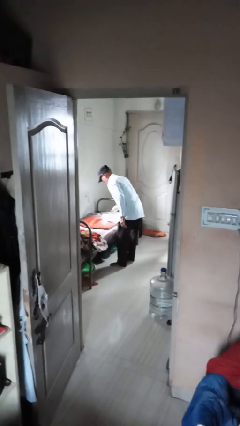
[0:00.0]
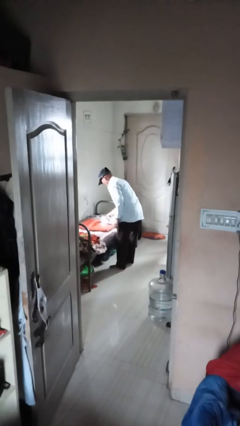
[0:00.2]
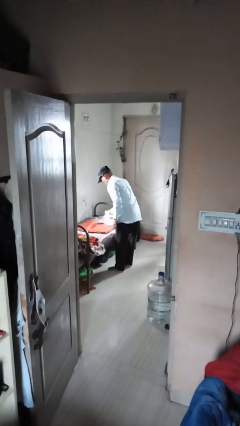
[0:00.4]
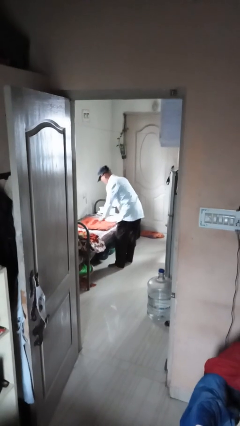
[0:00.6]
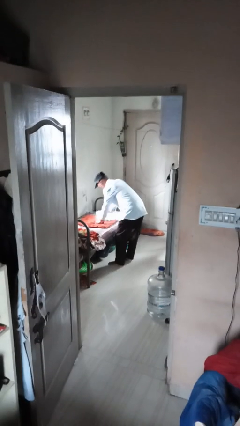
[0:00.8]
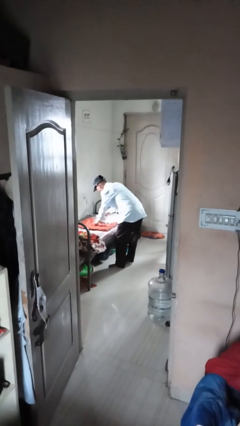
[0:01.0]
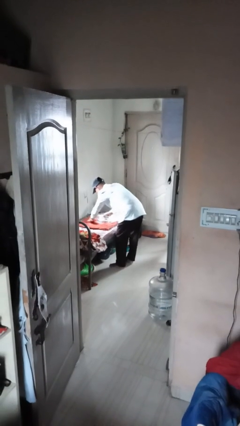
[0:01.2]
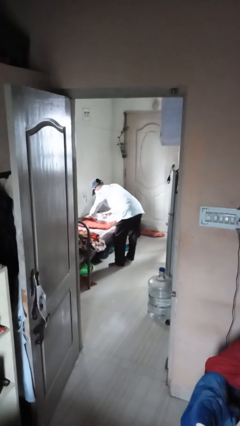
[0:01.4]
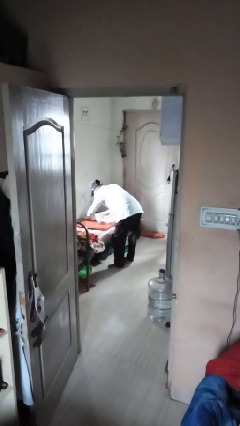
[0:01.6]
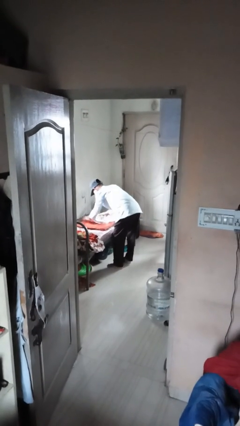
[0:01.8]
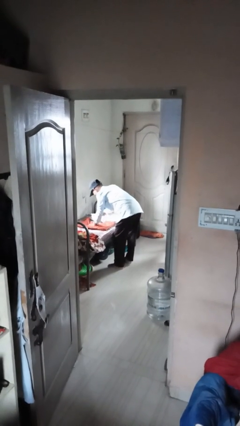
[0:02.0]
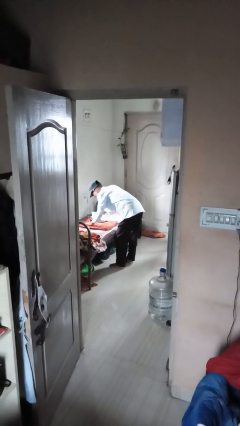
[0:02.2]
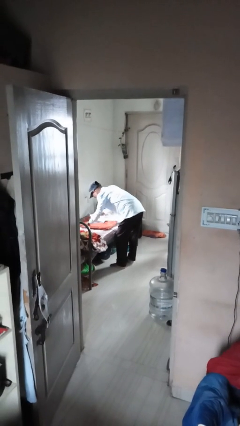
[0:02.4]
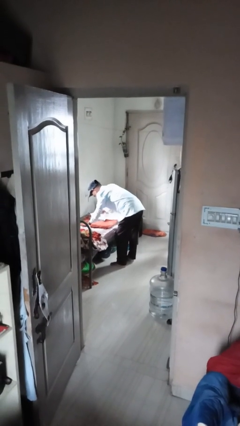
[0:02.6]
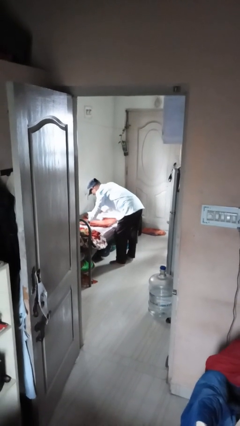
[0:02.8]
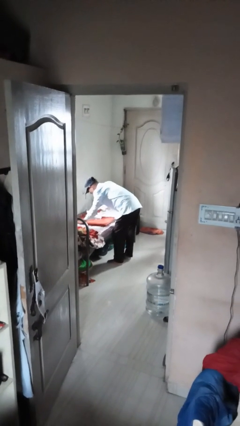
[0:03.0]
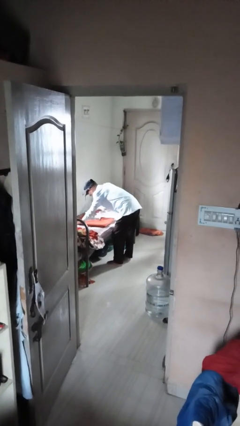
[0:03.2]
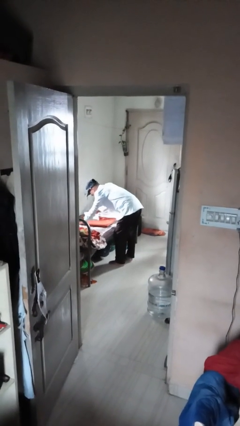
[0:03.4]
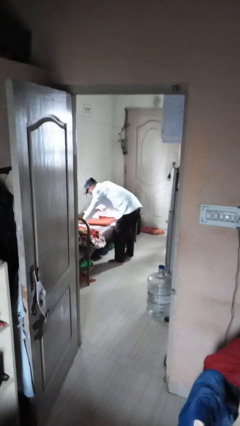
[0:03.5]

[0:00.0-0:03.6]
person irons clothes

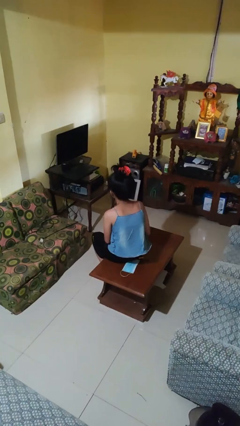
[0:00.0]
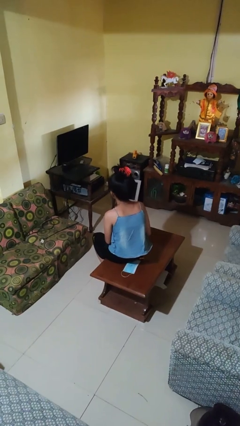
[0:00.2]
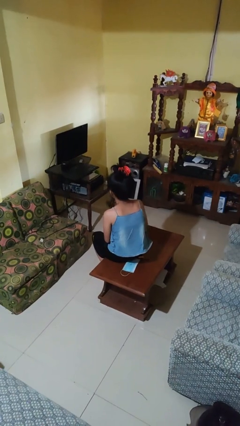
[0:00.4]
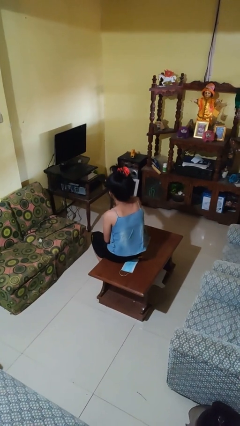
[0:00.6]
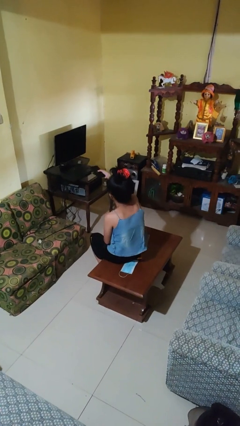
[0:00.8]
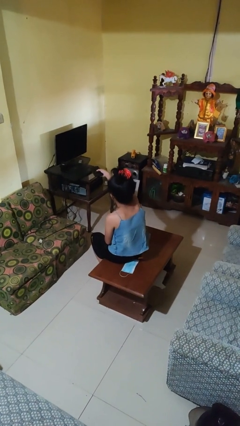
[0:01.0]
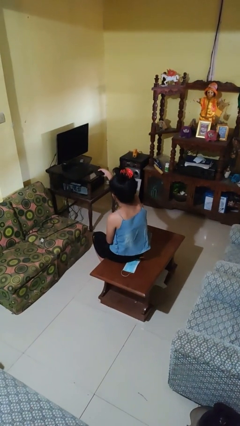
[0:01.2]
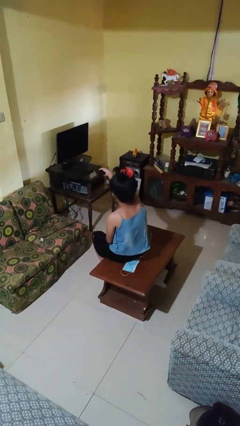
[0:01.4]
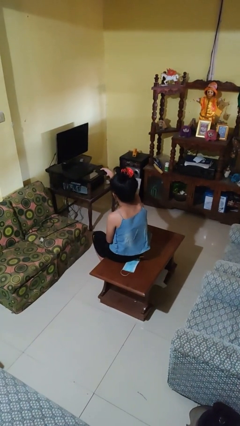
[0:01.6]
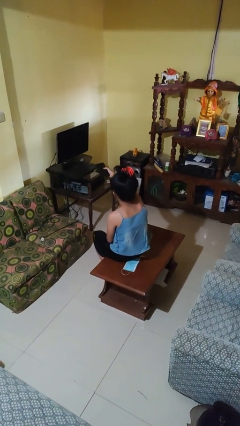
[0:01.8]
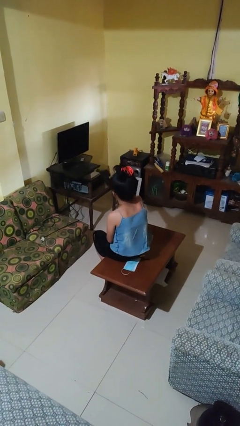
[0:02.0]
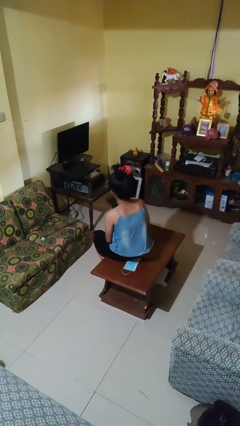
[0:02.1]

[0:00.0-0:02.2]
person uses television remote

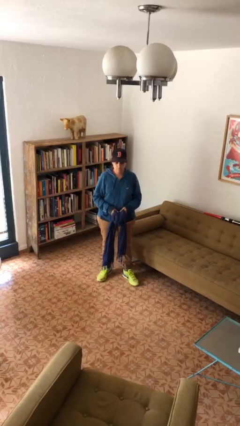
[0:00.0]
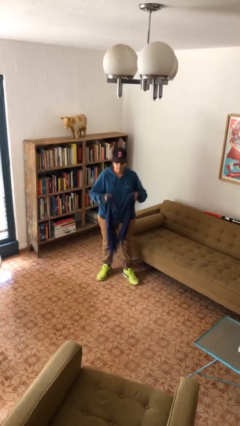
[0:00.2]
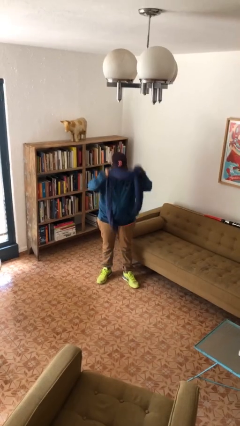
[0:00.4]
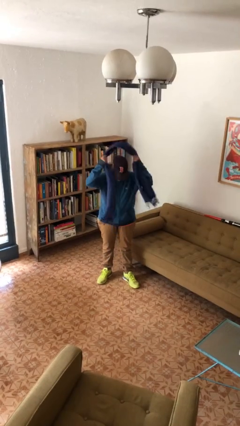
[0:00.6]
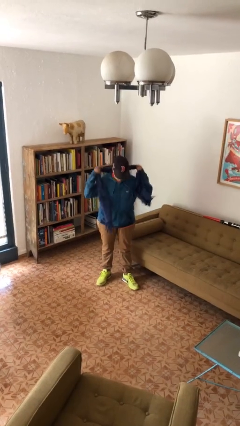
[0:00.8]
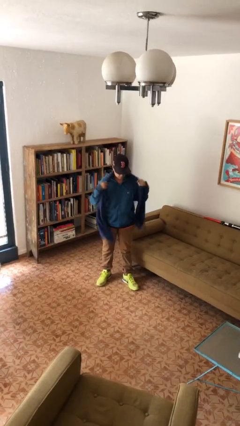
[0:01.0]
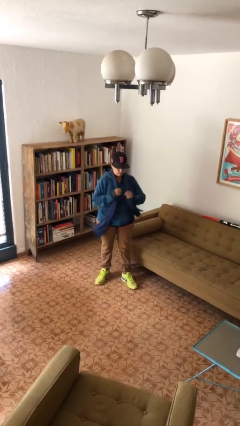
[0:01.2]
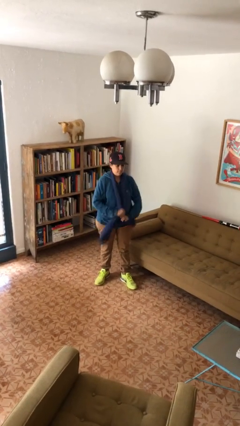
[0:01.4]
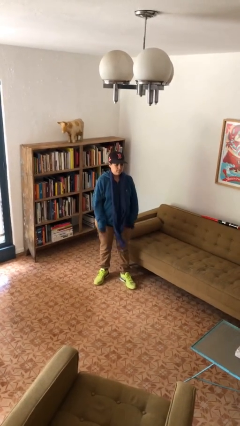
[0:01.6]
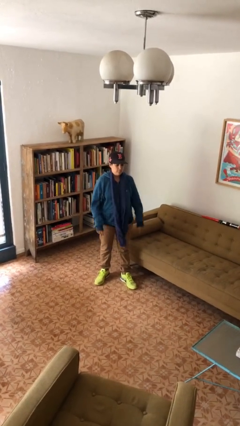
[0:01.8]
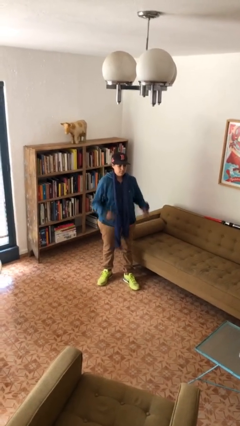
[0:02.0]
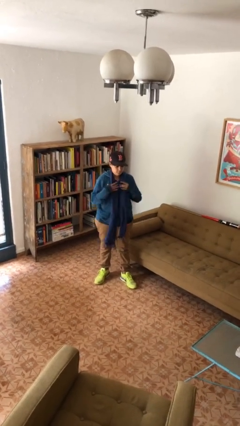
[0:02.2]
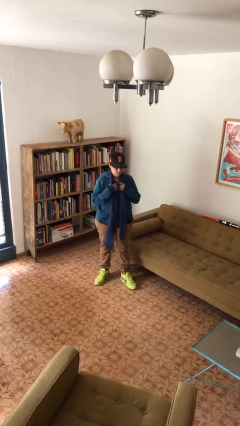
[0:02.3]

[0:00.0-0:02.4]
person puts on scarf

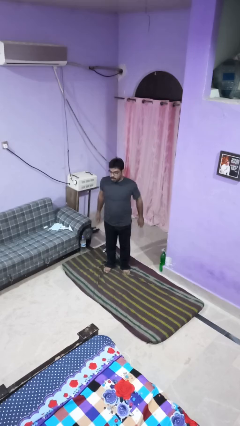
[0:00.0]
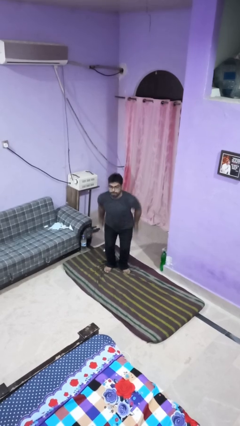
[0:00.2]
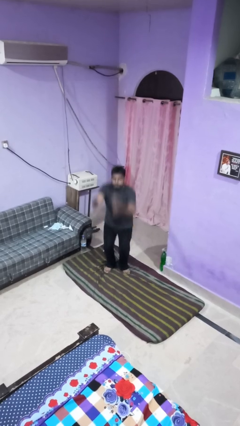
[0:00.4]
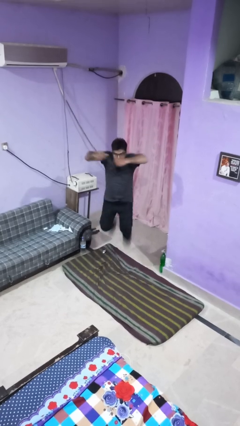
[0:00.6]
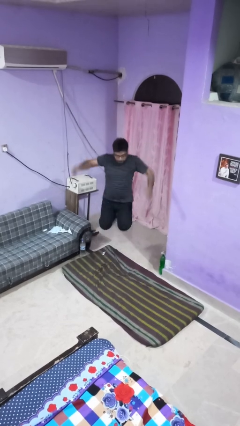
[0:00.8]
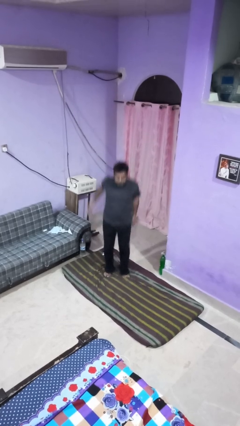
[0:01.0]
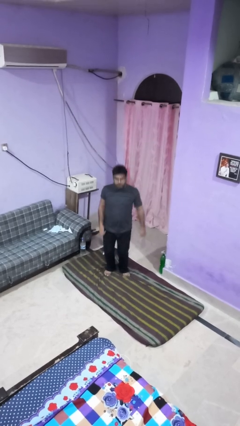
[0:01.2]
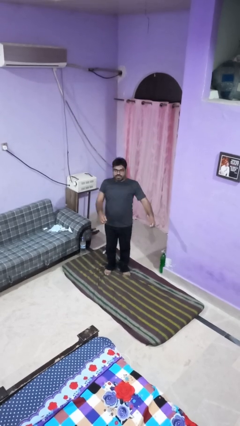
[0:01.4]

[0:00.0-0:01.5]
person jumps

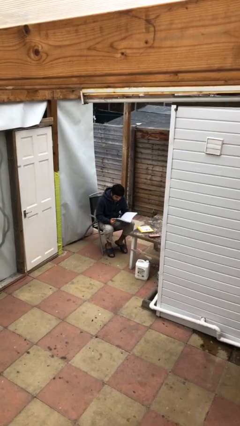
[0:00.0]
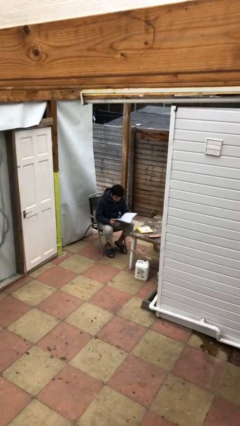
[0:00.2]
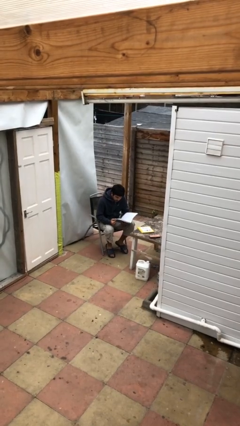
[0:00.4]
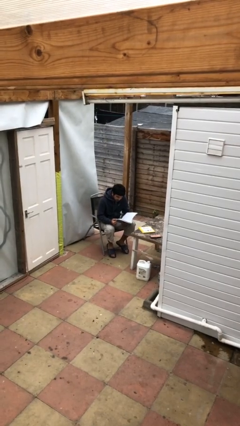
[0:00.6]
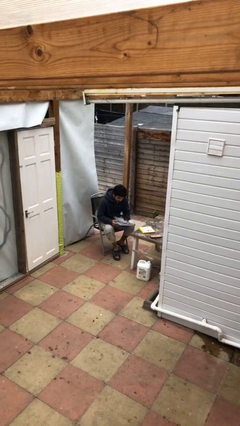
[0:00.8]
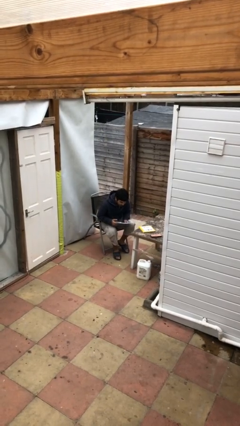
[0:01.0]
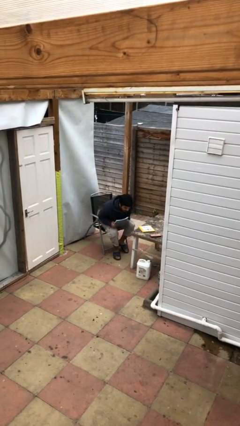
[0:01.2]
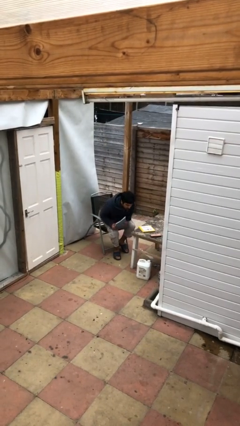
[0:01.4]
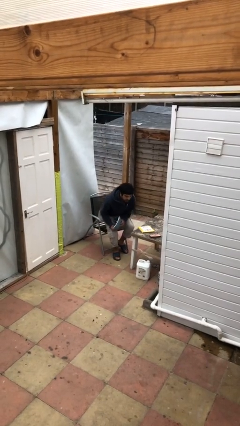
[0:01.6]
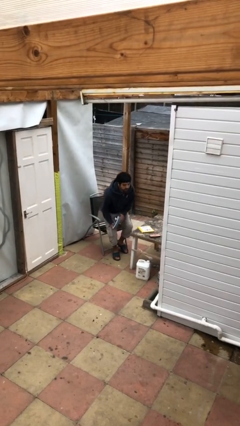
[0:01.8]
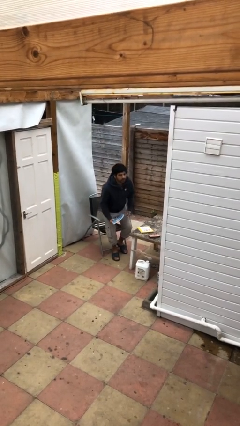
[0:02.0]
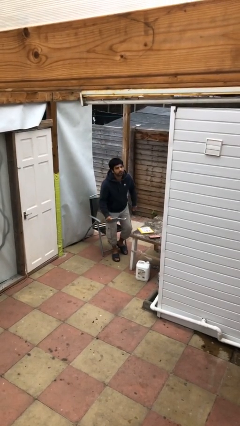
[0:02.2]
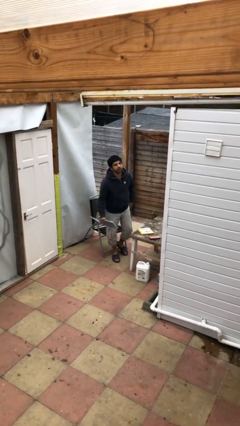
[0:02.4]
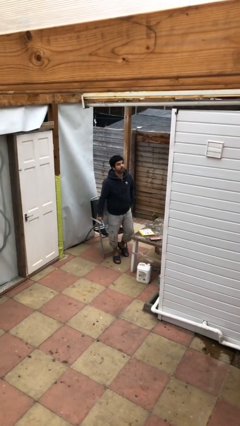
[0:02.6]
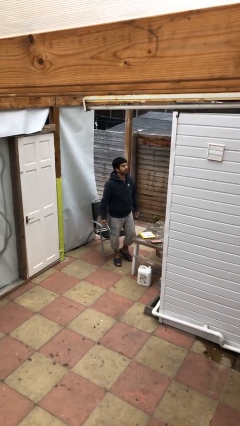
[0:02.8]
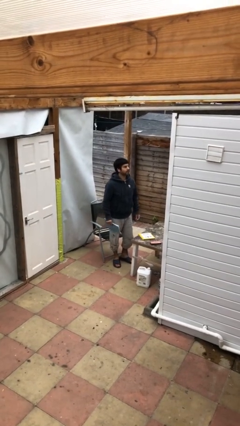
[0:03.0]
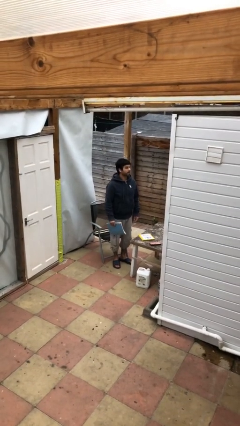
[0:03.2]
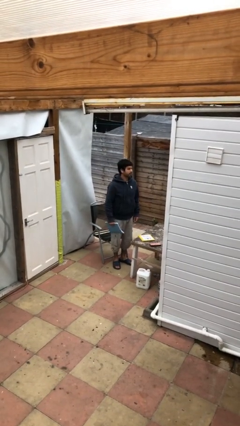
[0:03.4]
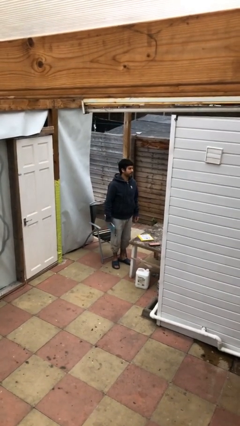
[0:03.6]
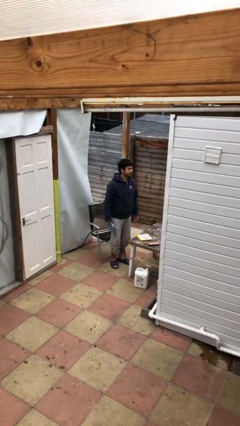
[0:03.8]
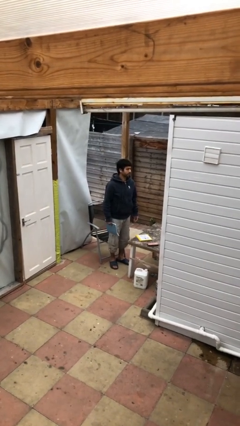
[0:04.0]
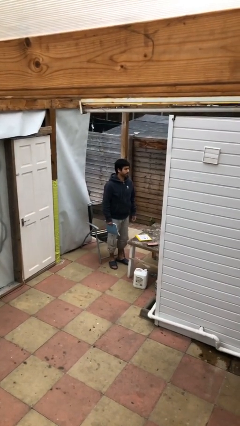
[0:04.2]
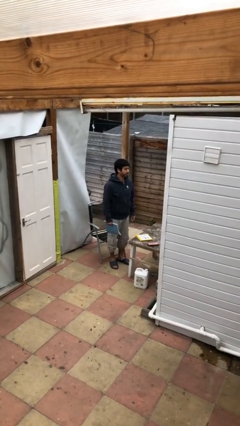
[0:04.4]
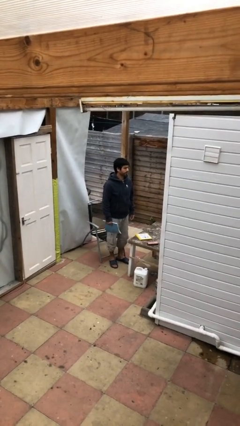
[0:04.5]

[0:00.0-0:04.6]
person stands up

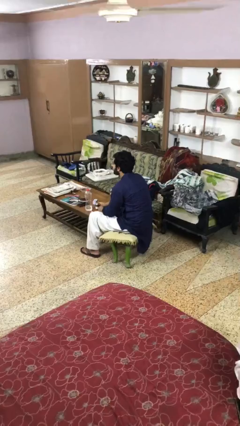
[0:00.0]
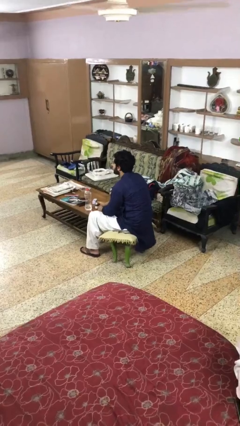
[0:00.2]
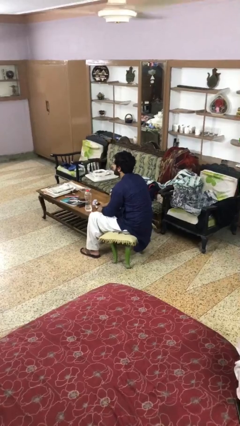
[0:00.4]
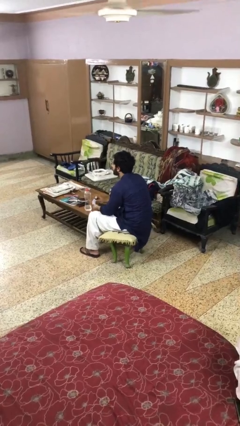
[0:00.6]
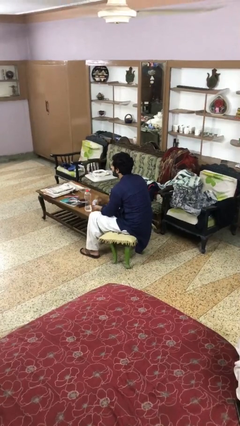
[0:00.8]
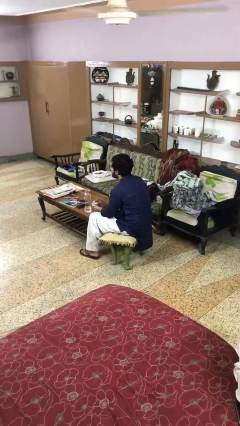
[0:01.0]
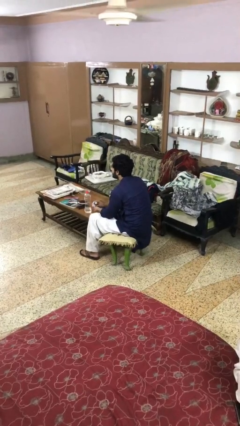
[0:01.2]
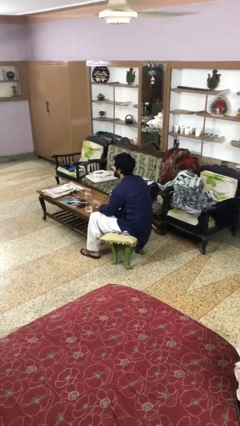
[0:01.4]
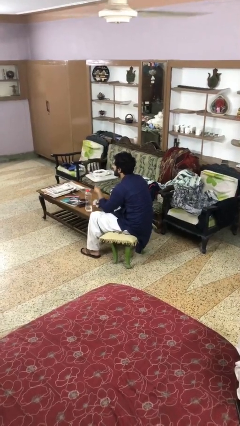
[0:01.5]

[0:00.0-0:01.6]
person takes medicine pills

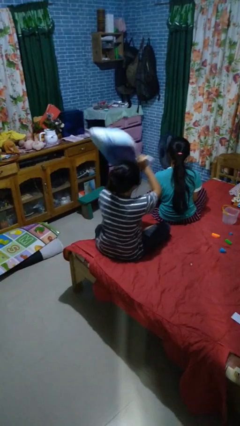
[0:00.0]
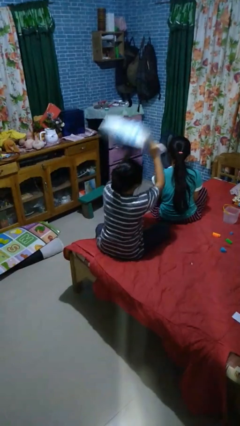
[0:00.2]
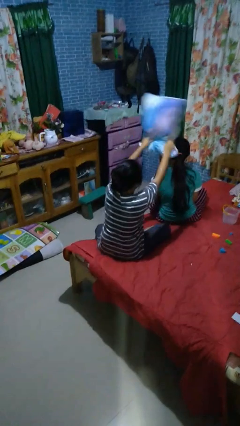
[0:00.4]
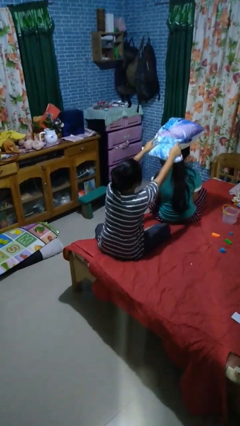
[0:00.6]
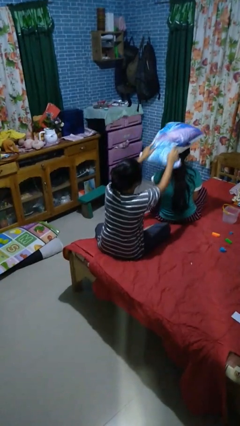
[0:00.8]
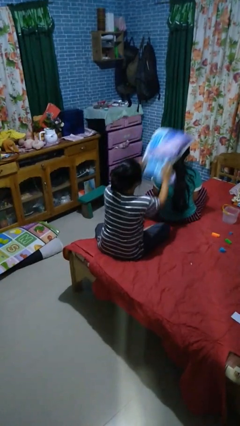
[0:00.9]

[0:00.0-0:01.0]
person hits person with pillow
